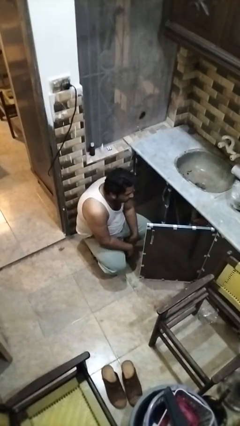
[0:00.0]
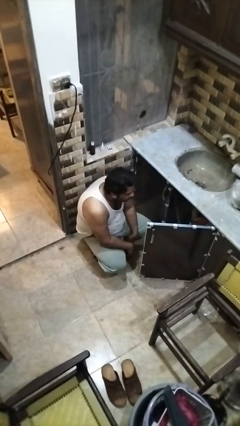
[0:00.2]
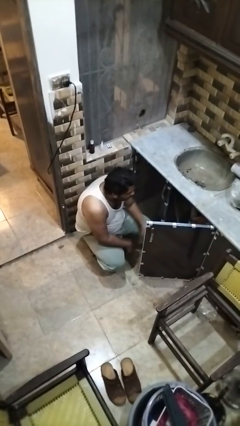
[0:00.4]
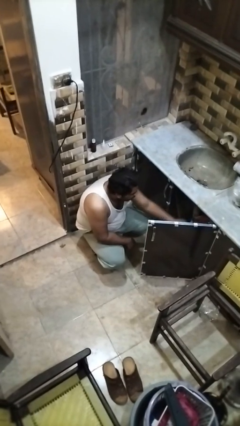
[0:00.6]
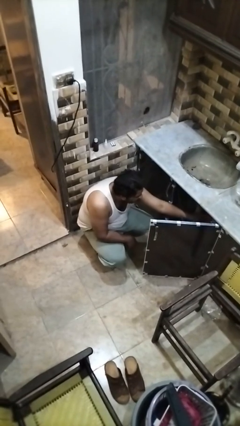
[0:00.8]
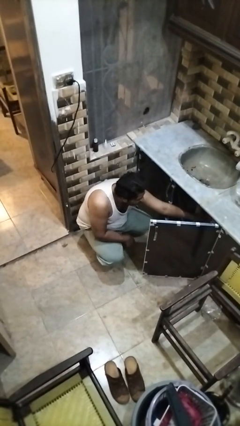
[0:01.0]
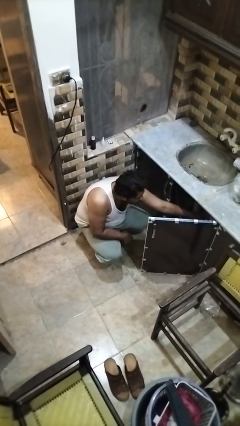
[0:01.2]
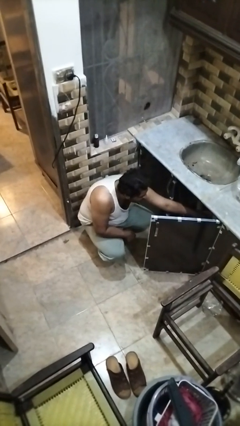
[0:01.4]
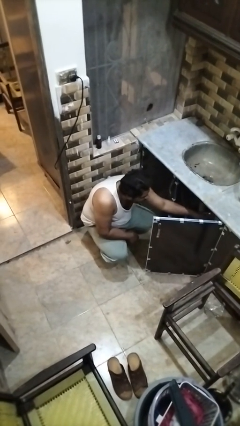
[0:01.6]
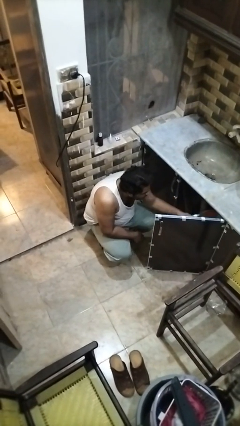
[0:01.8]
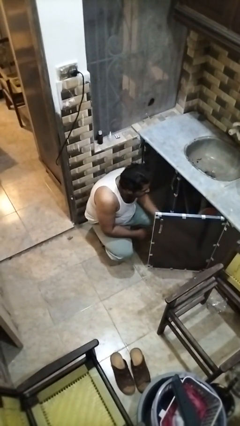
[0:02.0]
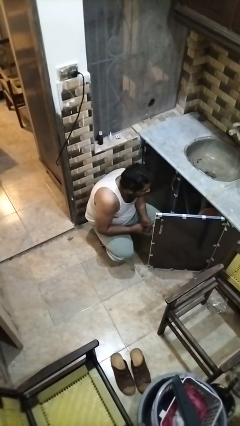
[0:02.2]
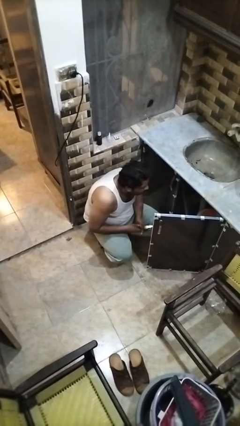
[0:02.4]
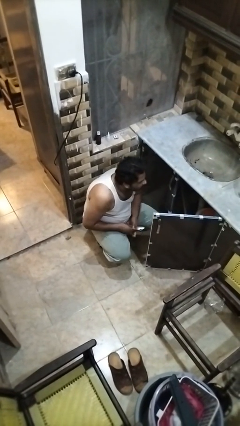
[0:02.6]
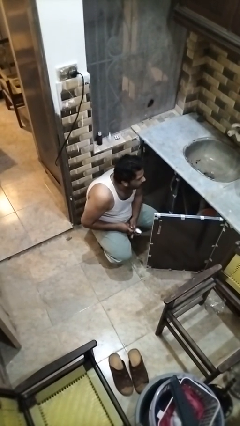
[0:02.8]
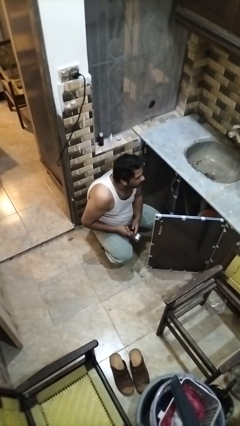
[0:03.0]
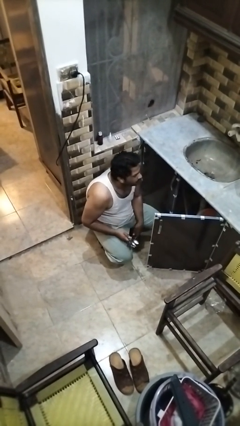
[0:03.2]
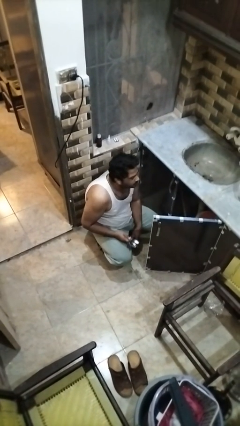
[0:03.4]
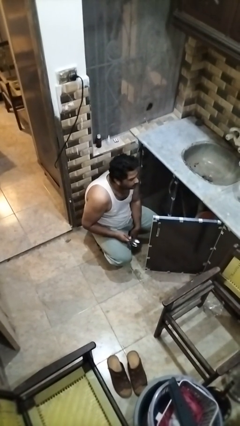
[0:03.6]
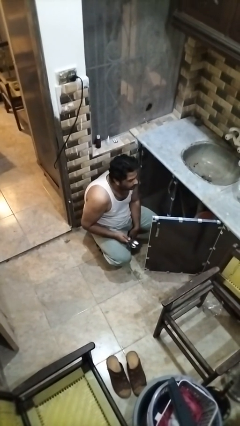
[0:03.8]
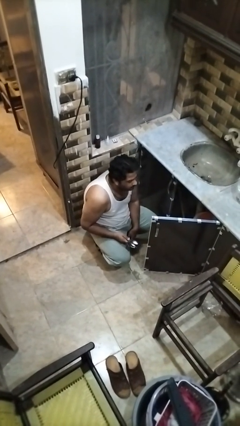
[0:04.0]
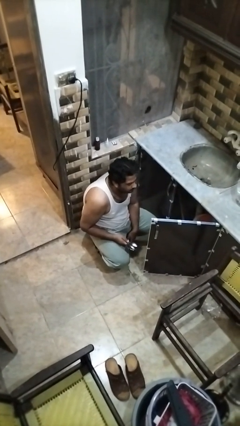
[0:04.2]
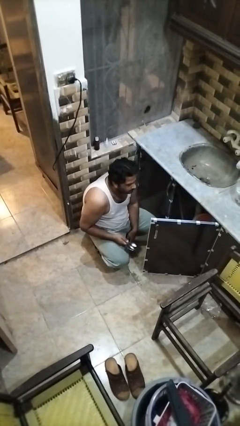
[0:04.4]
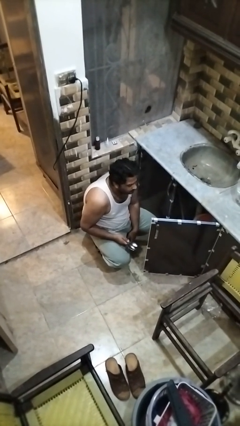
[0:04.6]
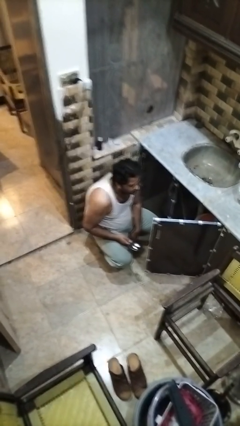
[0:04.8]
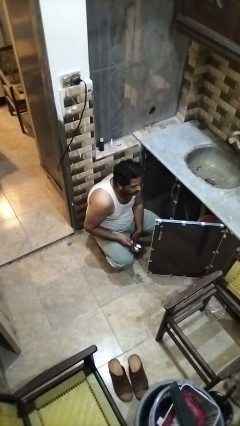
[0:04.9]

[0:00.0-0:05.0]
person takes object from kitchen drawer

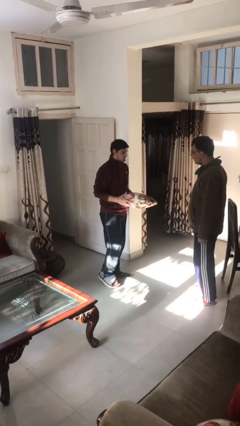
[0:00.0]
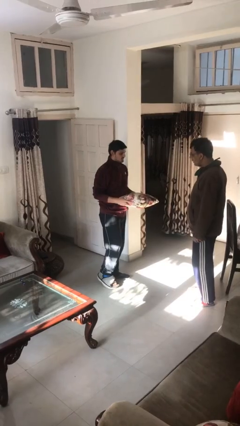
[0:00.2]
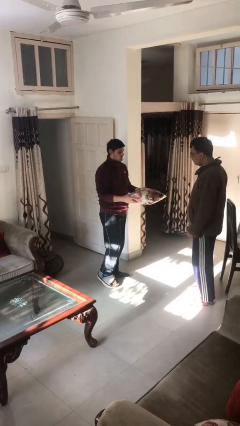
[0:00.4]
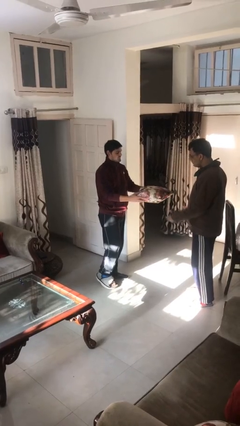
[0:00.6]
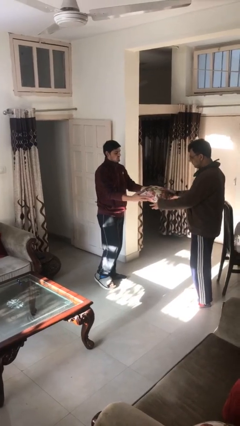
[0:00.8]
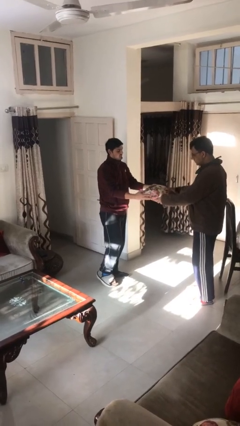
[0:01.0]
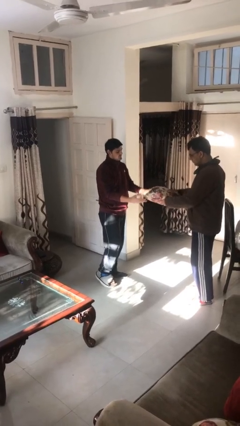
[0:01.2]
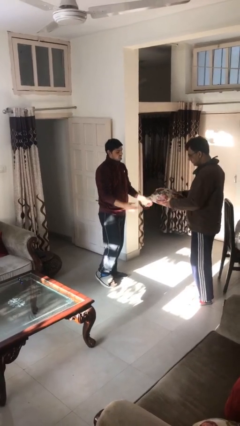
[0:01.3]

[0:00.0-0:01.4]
person transfers object to person

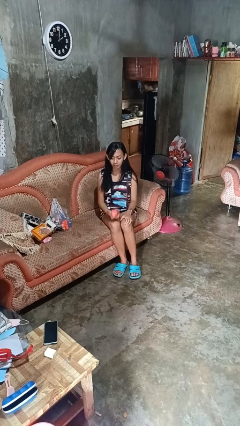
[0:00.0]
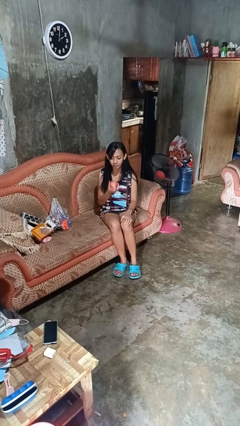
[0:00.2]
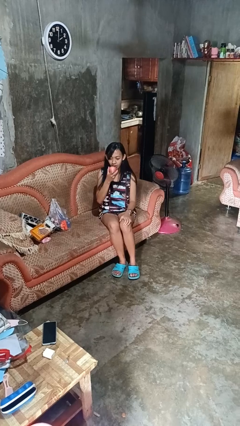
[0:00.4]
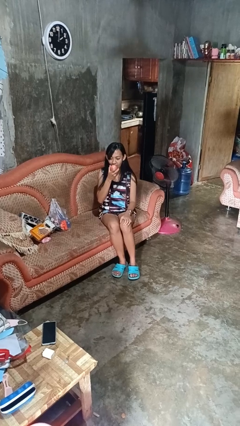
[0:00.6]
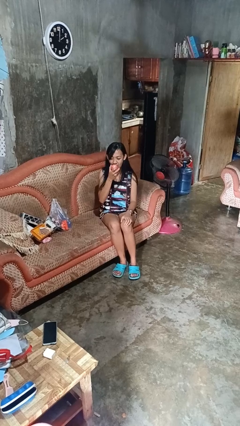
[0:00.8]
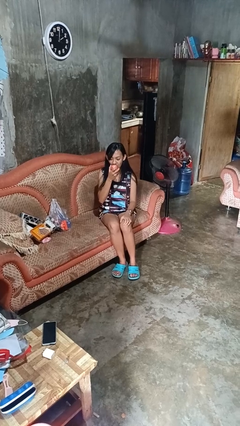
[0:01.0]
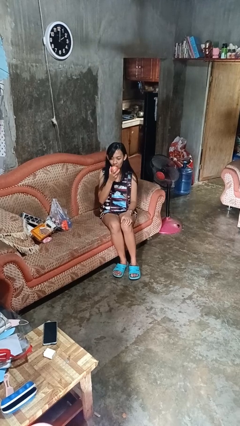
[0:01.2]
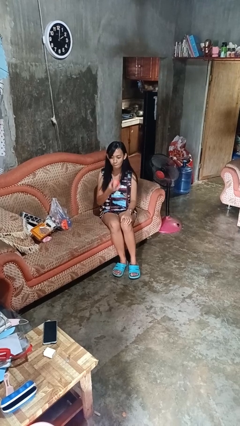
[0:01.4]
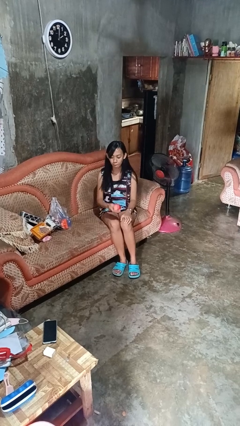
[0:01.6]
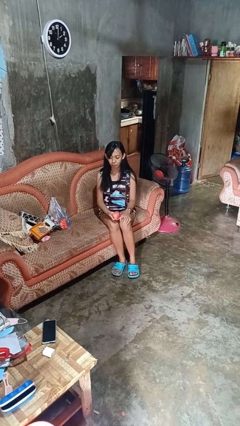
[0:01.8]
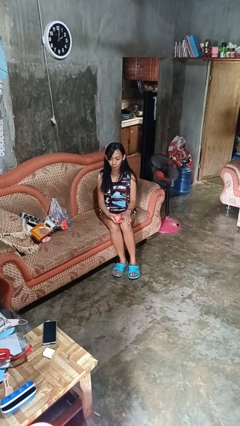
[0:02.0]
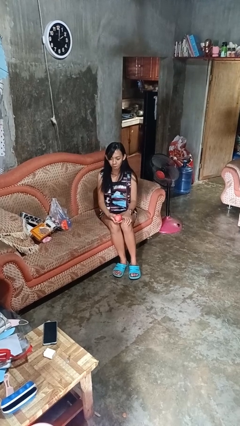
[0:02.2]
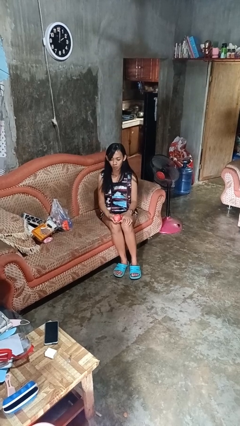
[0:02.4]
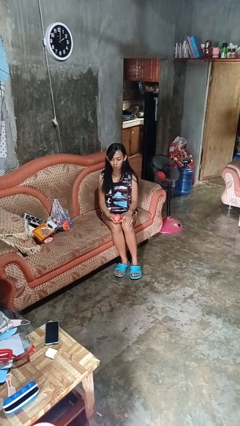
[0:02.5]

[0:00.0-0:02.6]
person eats apple

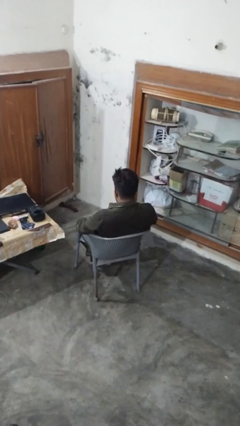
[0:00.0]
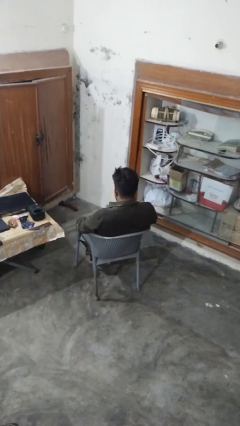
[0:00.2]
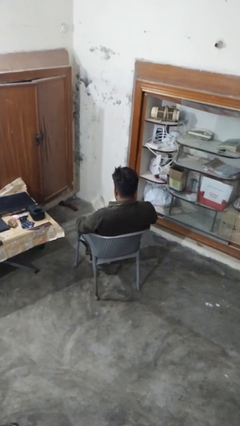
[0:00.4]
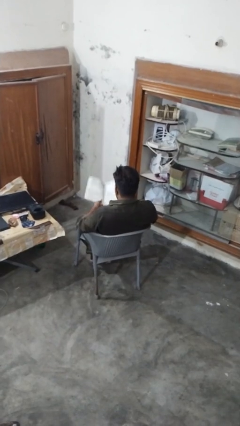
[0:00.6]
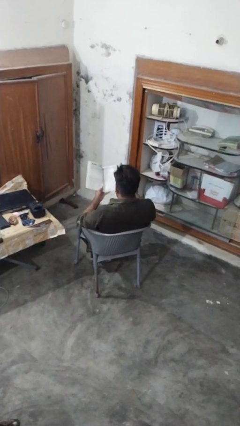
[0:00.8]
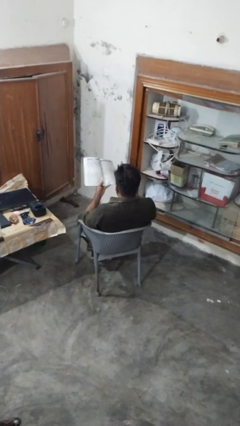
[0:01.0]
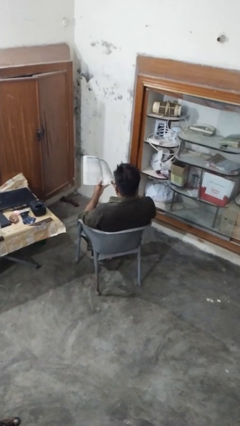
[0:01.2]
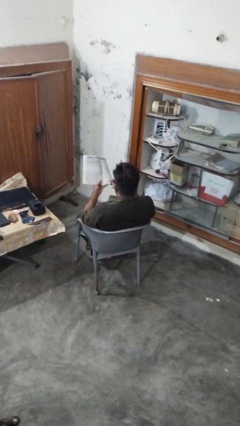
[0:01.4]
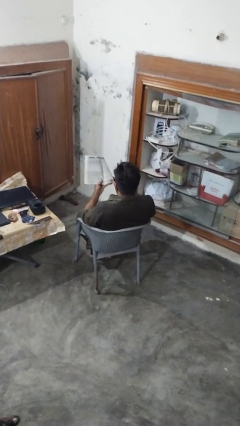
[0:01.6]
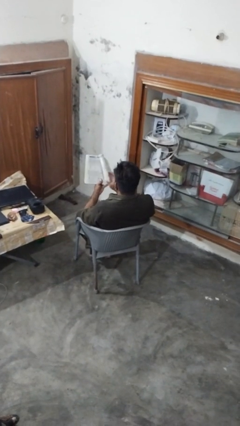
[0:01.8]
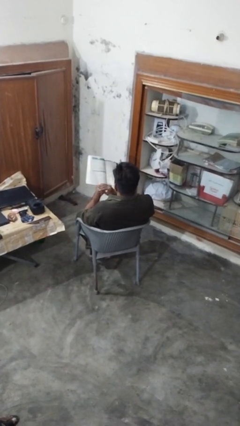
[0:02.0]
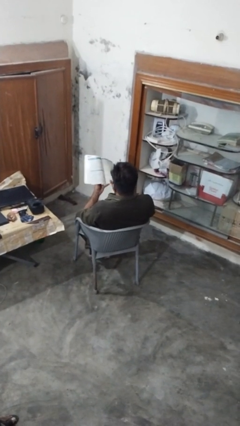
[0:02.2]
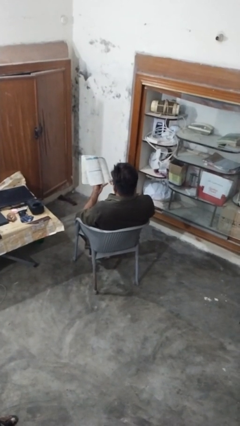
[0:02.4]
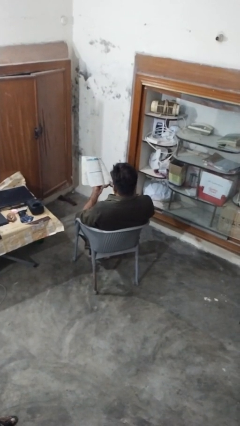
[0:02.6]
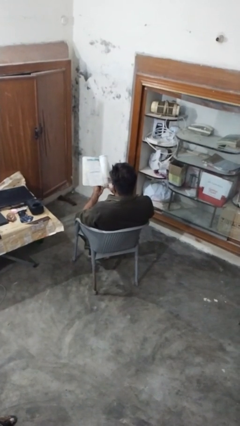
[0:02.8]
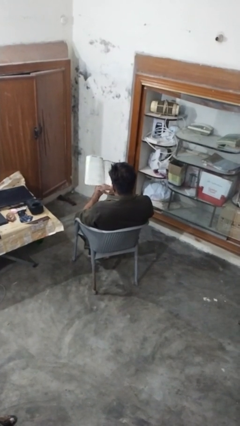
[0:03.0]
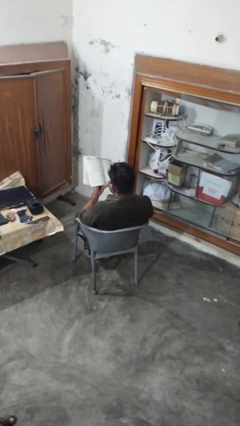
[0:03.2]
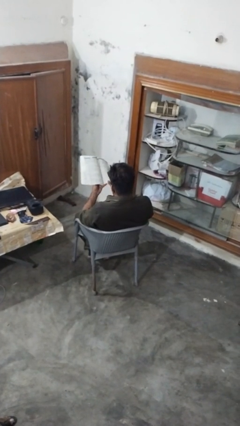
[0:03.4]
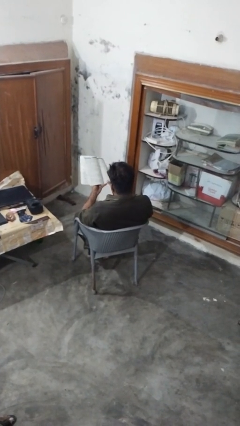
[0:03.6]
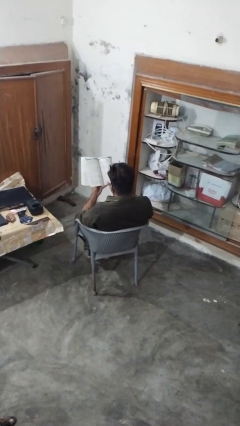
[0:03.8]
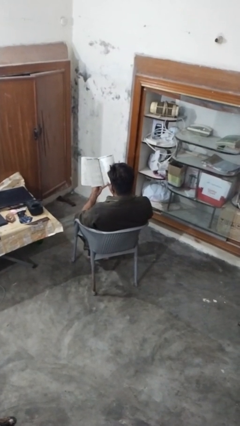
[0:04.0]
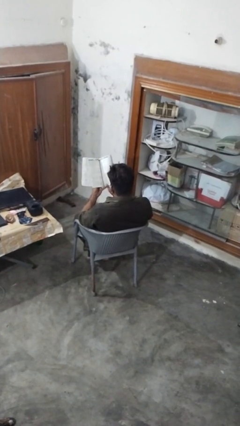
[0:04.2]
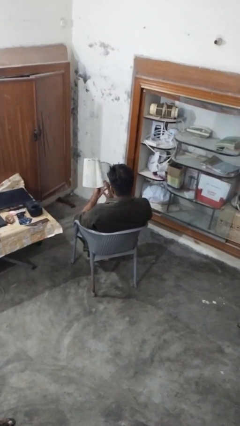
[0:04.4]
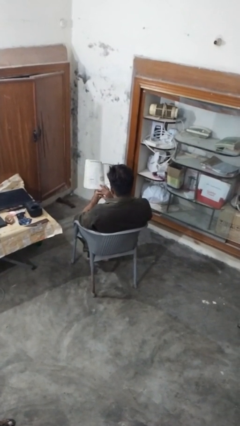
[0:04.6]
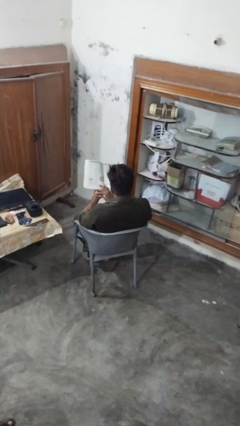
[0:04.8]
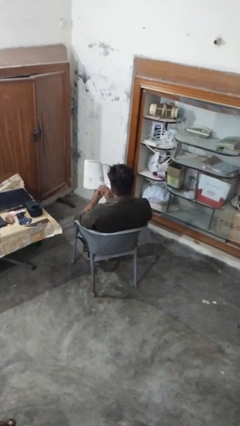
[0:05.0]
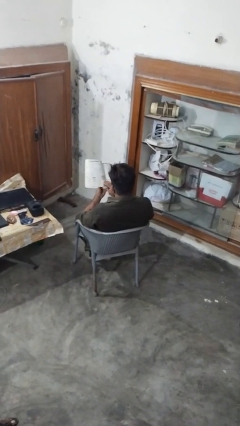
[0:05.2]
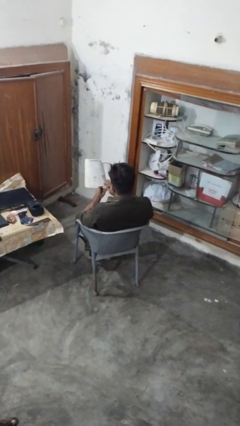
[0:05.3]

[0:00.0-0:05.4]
person reads book

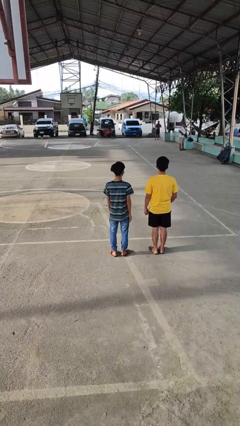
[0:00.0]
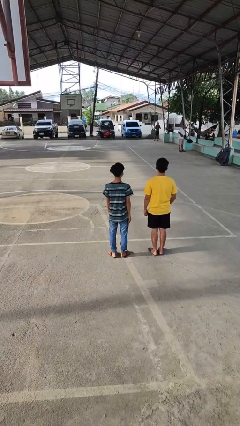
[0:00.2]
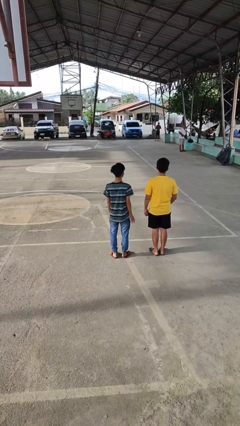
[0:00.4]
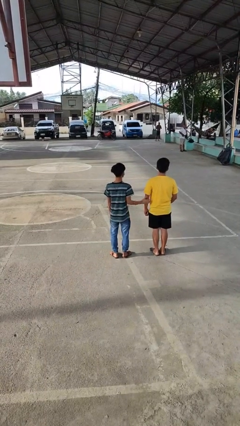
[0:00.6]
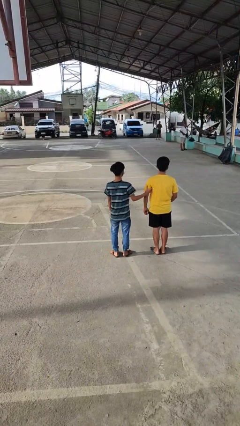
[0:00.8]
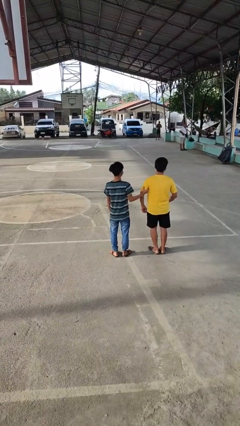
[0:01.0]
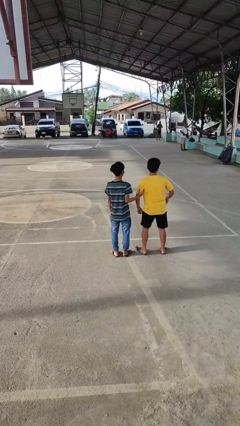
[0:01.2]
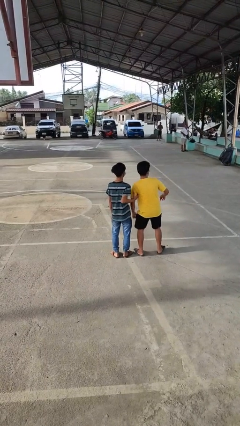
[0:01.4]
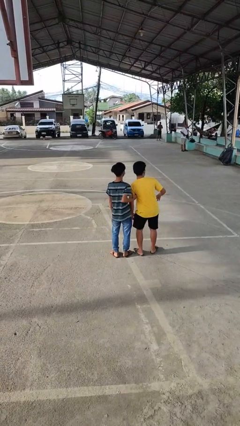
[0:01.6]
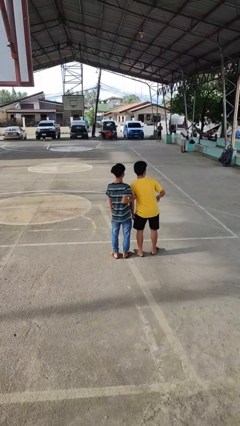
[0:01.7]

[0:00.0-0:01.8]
person grabs person by bicep

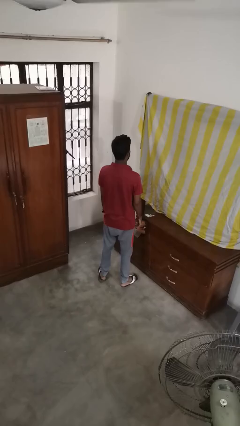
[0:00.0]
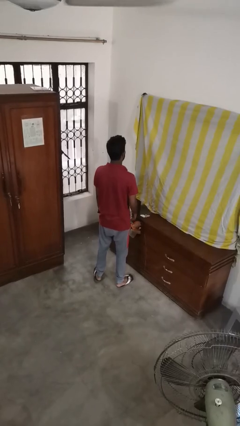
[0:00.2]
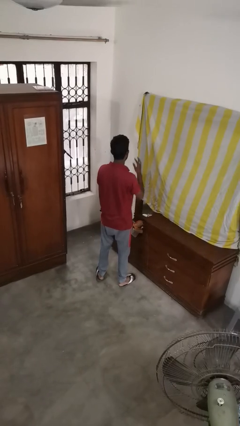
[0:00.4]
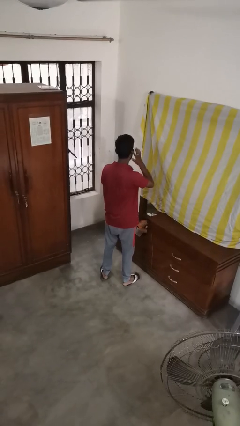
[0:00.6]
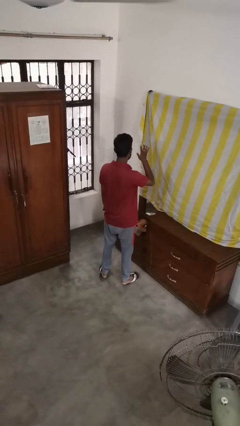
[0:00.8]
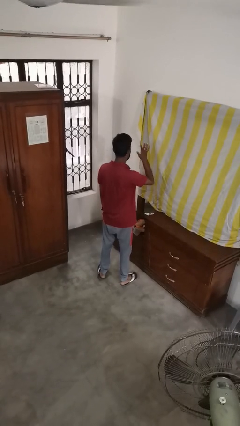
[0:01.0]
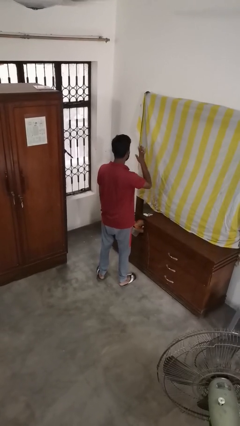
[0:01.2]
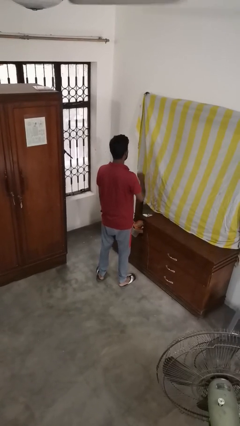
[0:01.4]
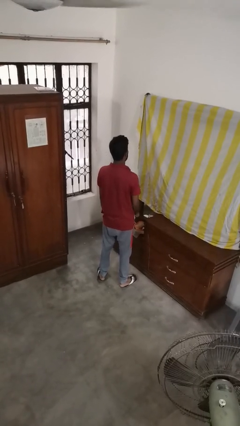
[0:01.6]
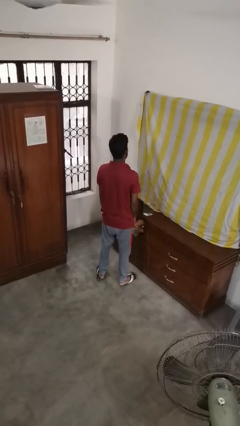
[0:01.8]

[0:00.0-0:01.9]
person puts fingers in ear
